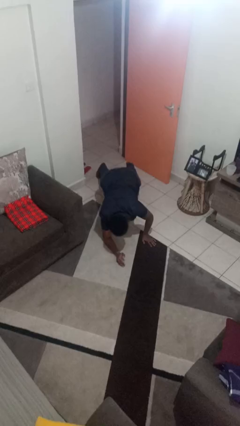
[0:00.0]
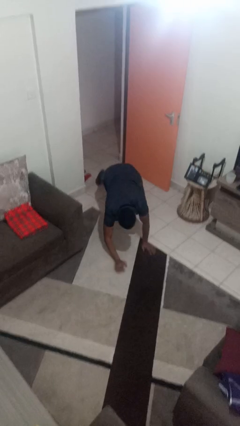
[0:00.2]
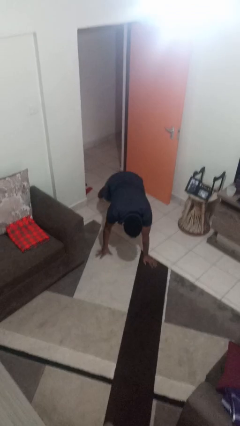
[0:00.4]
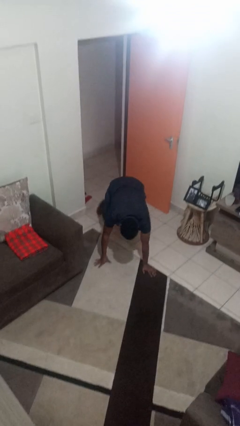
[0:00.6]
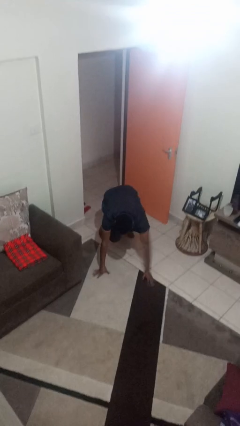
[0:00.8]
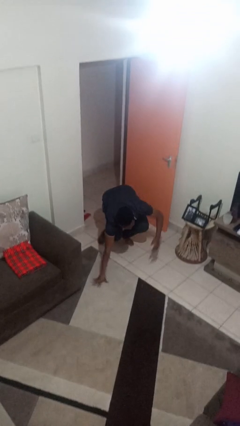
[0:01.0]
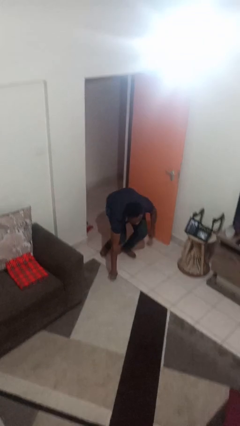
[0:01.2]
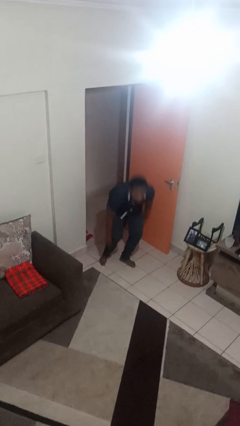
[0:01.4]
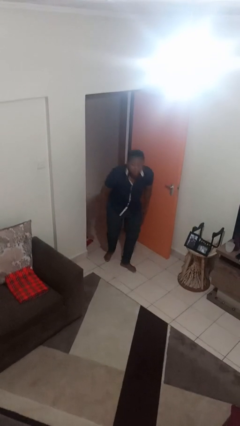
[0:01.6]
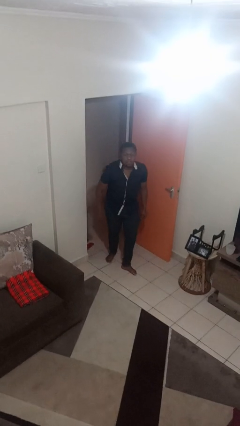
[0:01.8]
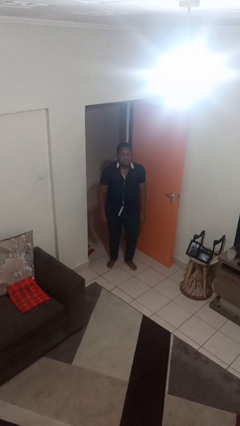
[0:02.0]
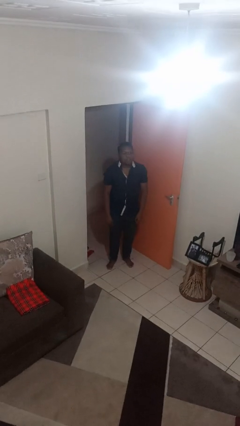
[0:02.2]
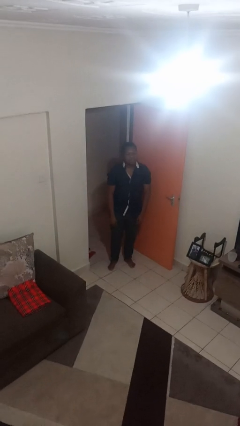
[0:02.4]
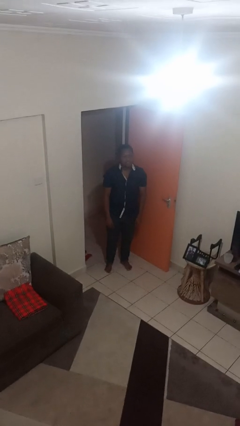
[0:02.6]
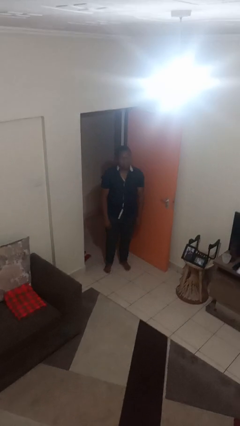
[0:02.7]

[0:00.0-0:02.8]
person stands up from floor

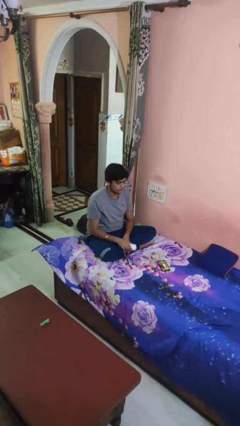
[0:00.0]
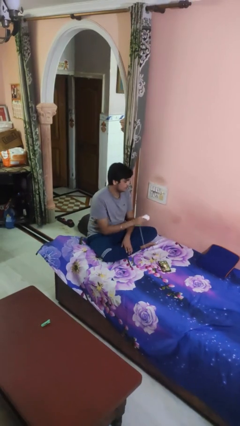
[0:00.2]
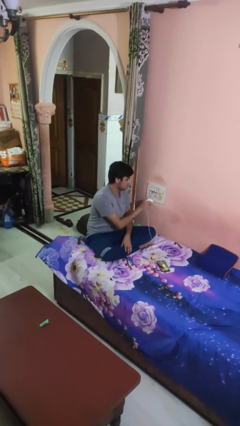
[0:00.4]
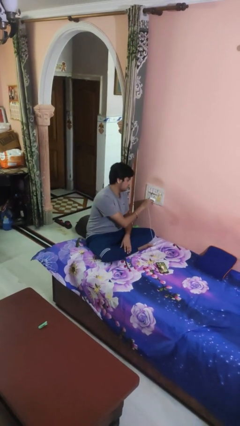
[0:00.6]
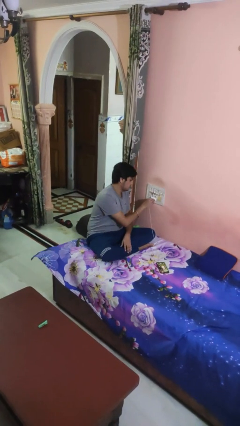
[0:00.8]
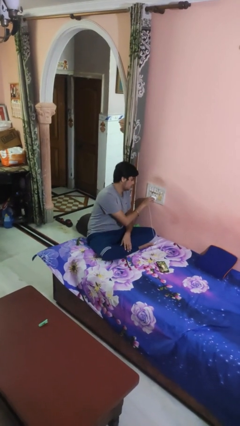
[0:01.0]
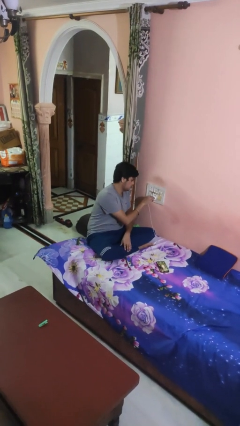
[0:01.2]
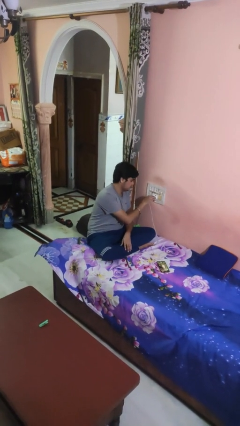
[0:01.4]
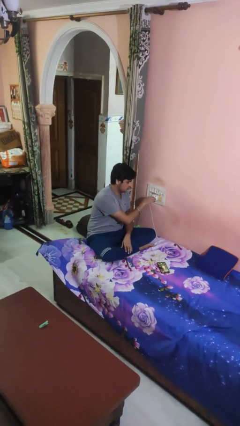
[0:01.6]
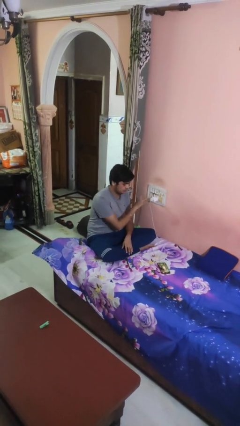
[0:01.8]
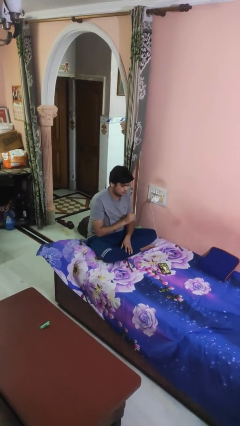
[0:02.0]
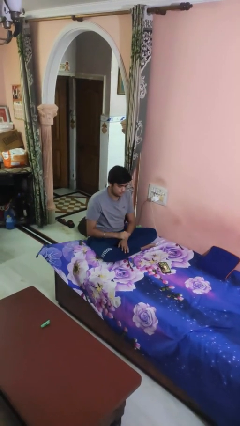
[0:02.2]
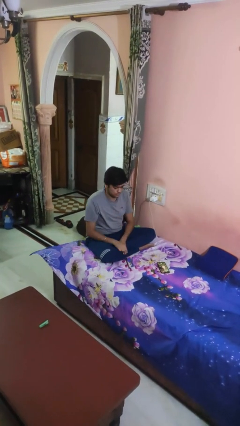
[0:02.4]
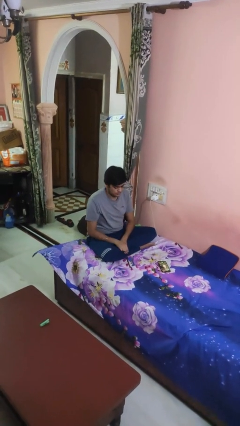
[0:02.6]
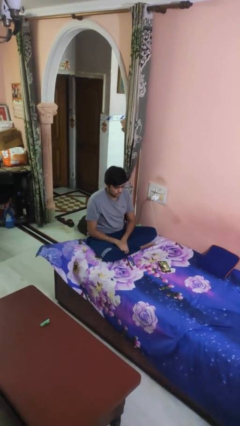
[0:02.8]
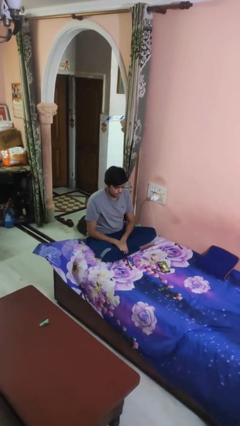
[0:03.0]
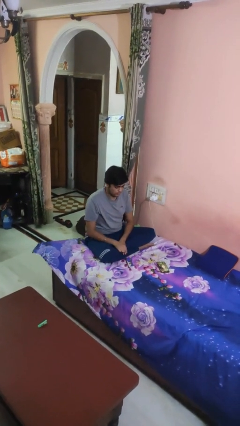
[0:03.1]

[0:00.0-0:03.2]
person plugs into electrical socket

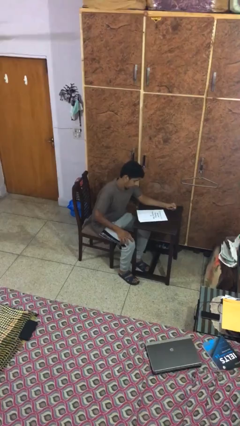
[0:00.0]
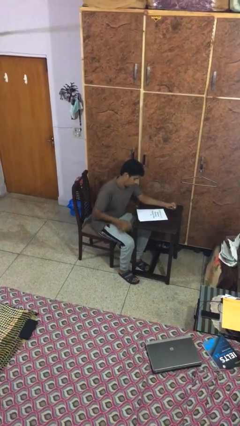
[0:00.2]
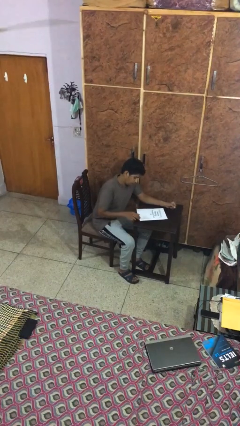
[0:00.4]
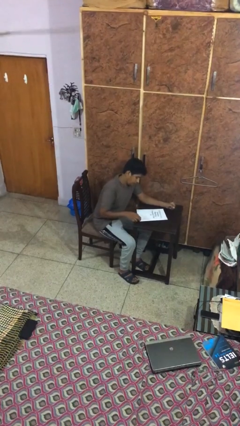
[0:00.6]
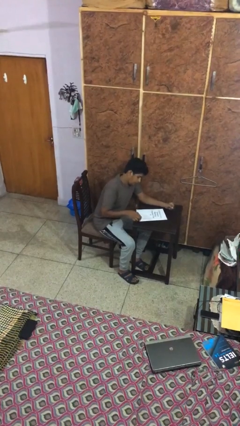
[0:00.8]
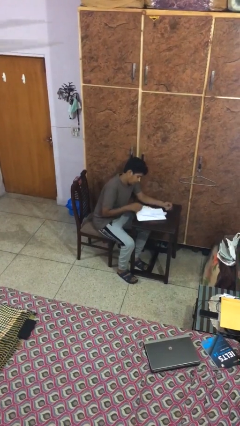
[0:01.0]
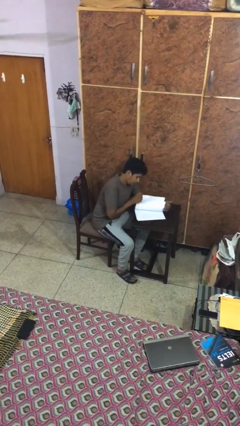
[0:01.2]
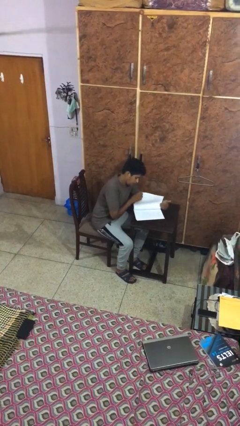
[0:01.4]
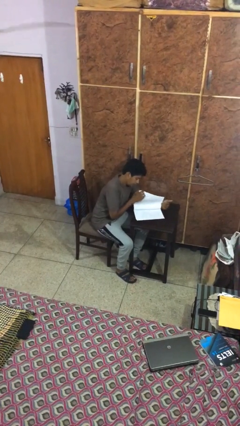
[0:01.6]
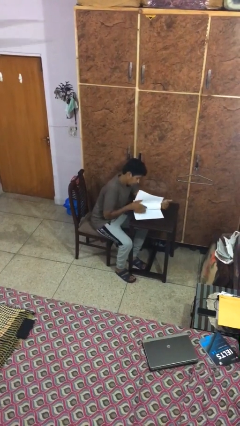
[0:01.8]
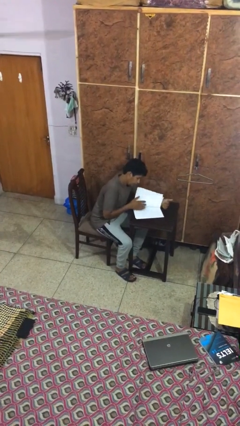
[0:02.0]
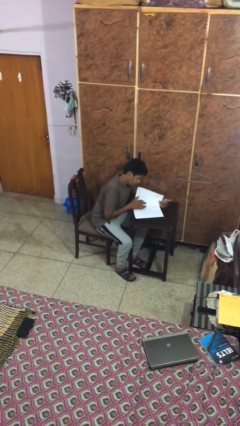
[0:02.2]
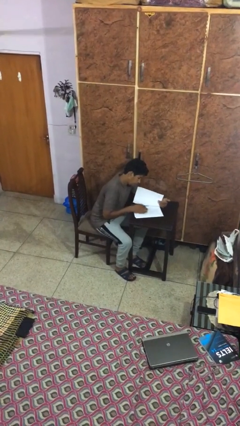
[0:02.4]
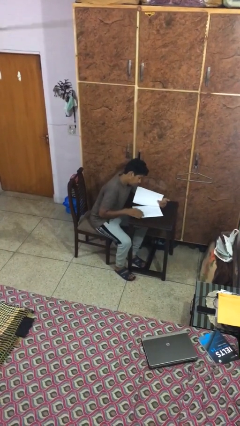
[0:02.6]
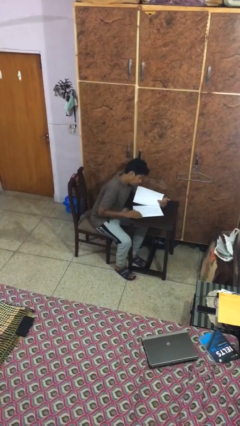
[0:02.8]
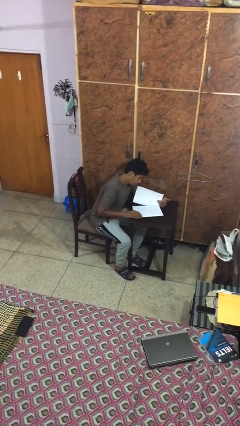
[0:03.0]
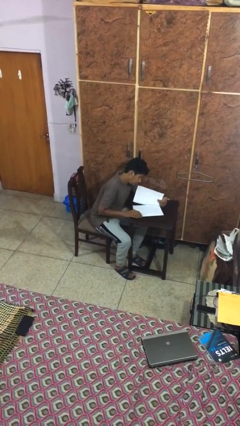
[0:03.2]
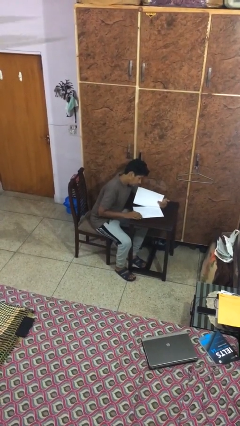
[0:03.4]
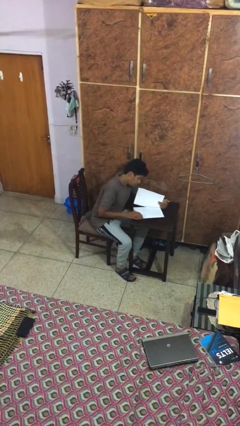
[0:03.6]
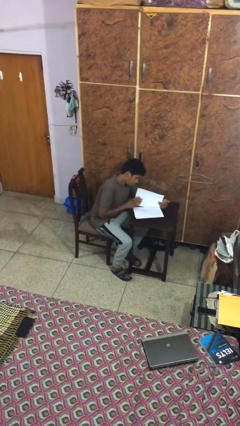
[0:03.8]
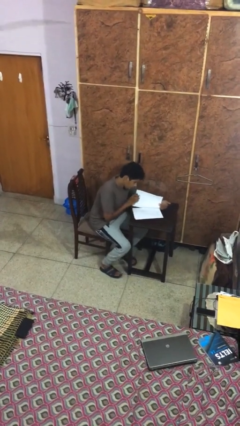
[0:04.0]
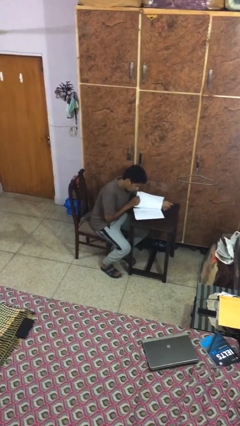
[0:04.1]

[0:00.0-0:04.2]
person reads document

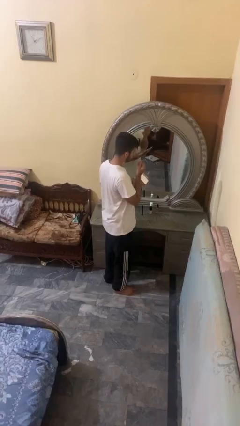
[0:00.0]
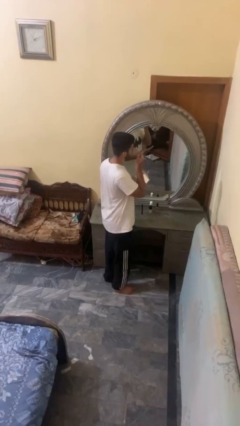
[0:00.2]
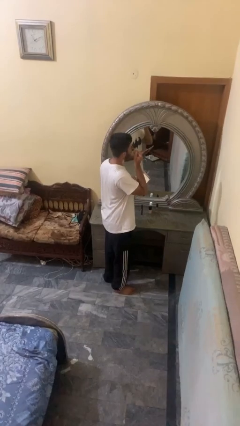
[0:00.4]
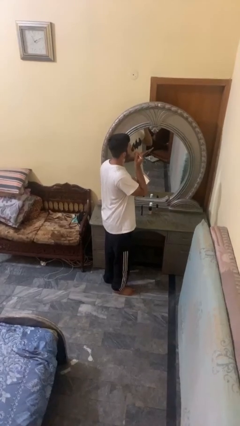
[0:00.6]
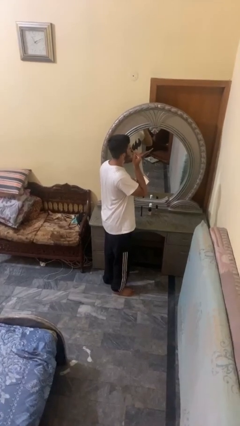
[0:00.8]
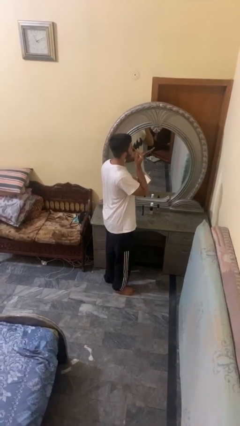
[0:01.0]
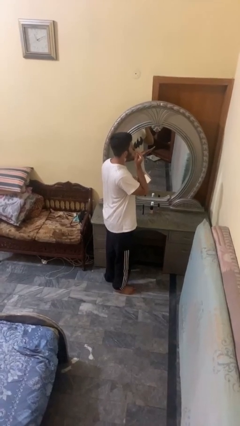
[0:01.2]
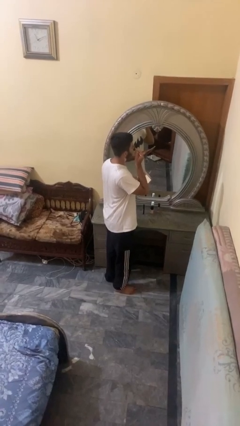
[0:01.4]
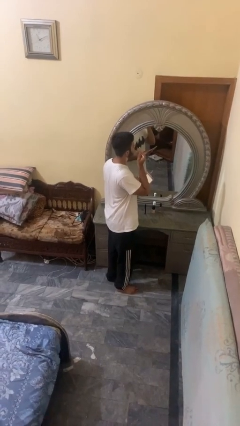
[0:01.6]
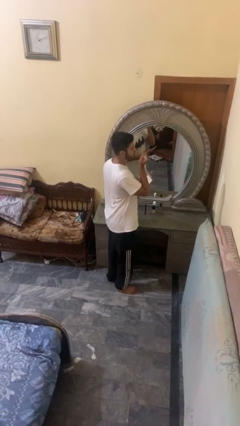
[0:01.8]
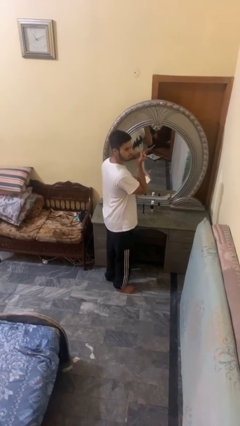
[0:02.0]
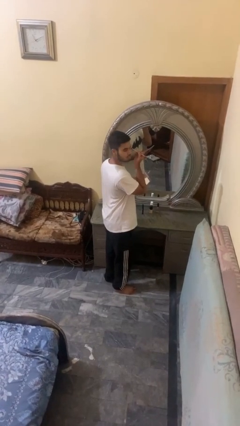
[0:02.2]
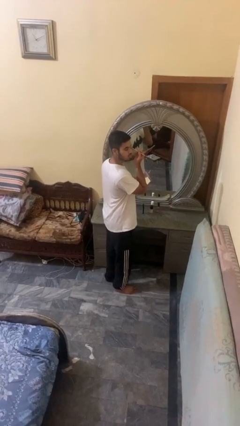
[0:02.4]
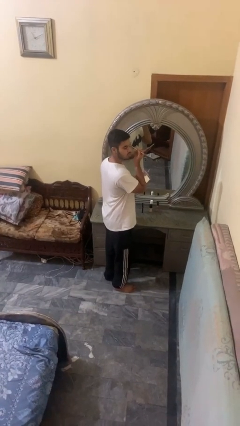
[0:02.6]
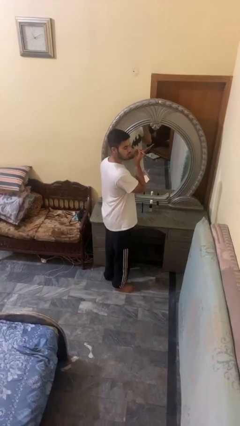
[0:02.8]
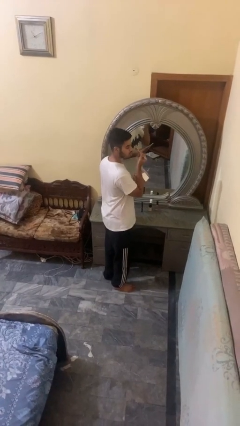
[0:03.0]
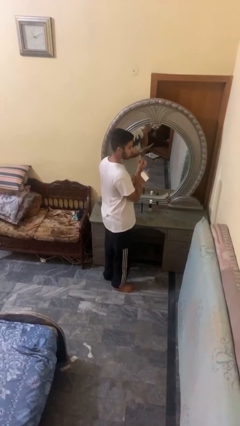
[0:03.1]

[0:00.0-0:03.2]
person applies eye makeup

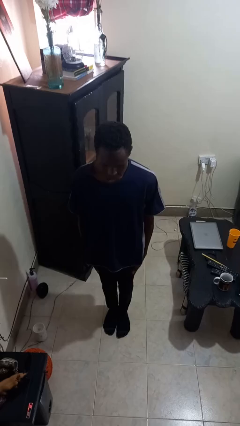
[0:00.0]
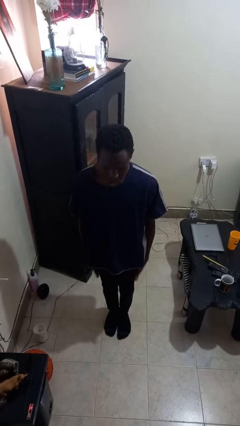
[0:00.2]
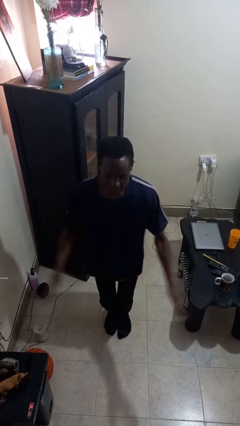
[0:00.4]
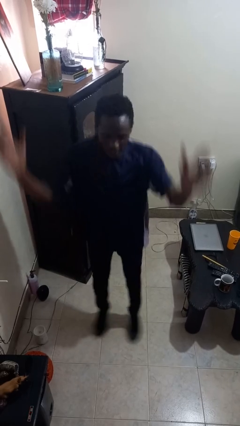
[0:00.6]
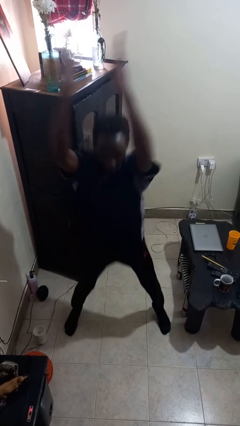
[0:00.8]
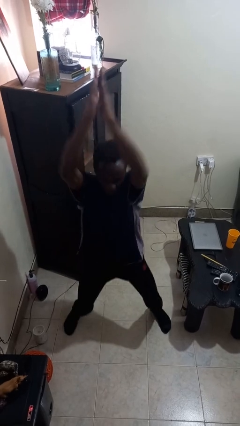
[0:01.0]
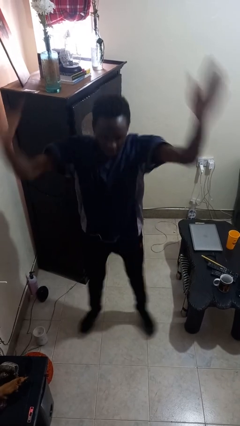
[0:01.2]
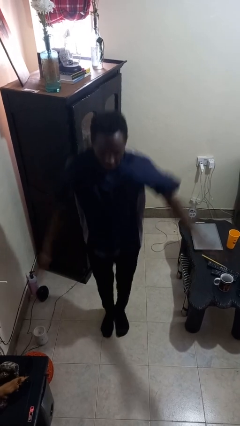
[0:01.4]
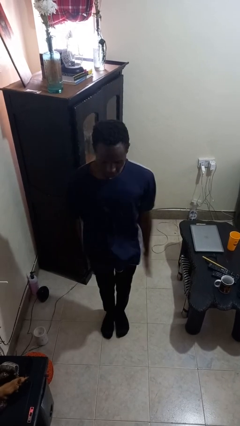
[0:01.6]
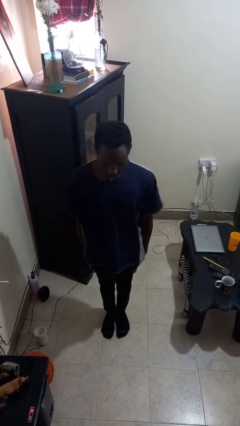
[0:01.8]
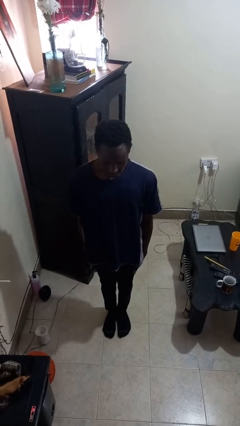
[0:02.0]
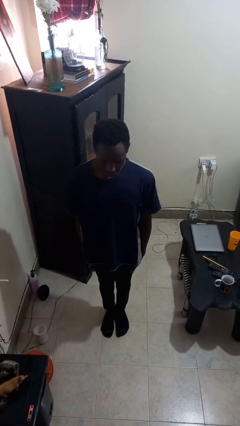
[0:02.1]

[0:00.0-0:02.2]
person exercises with jumping jacks

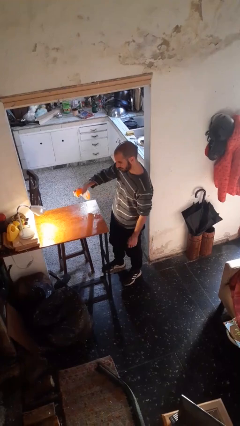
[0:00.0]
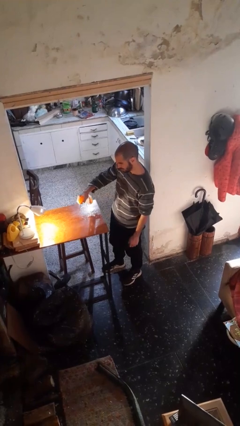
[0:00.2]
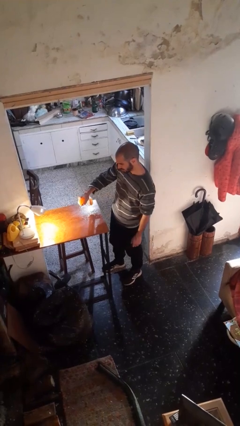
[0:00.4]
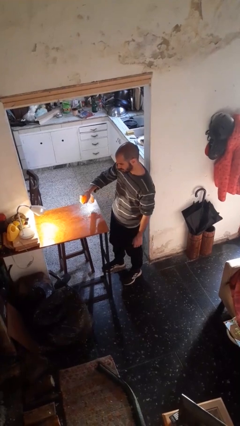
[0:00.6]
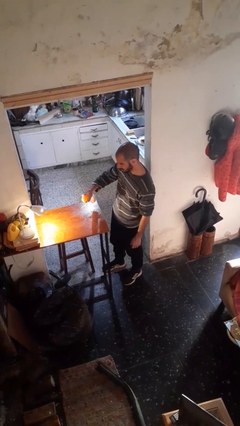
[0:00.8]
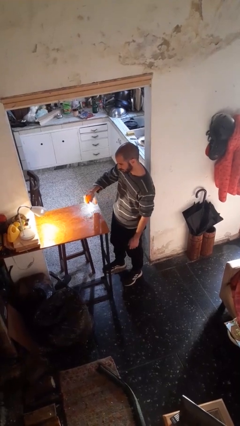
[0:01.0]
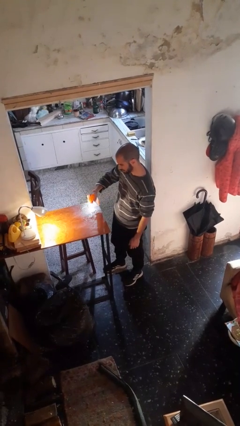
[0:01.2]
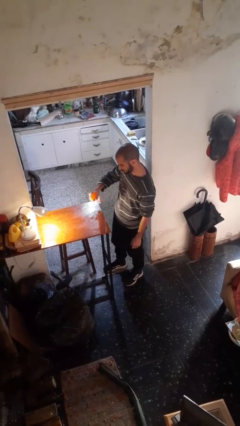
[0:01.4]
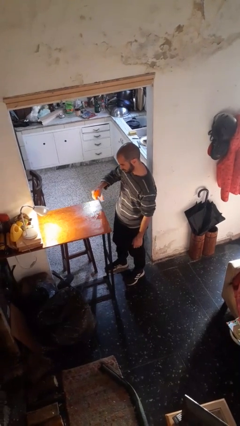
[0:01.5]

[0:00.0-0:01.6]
person sprays from bottle
